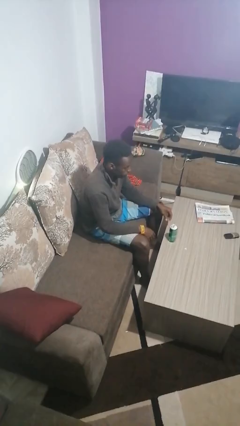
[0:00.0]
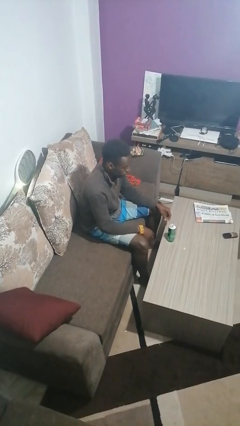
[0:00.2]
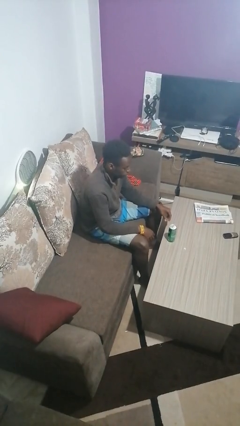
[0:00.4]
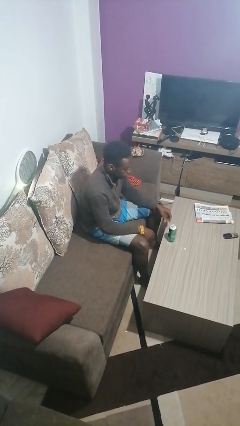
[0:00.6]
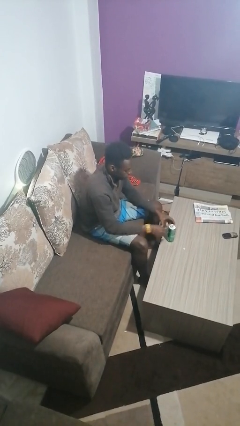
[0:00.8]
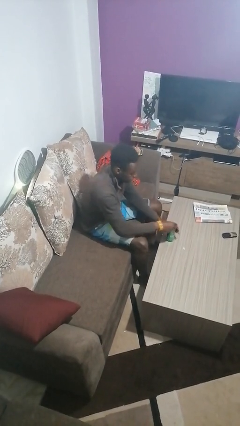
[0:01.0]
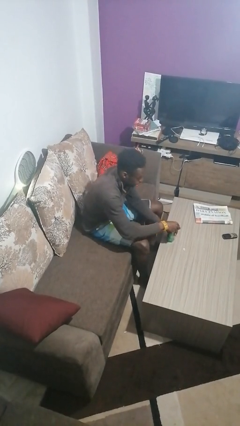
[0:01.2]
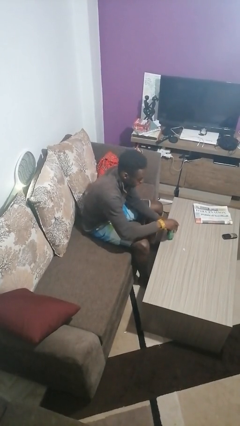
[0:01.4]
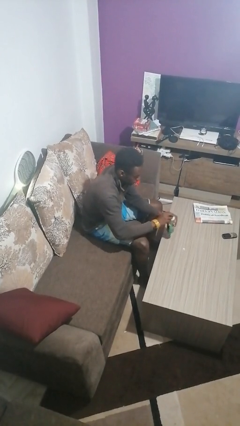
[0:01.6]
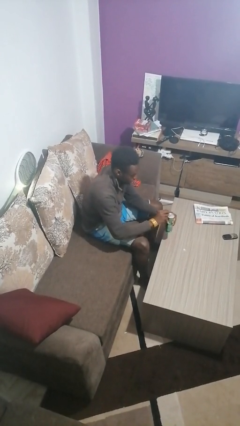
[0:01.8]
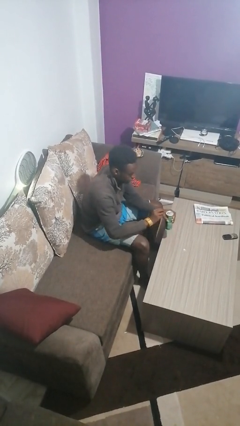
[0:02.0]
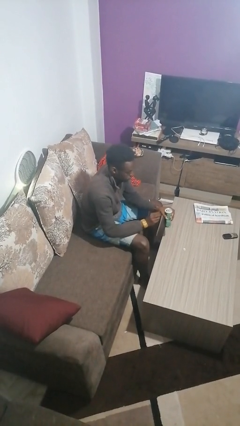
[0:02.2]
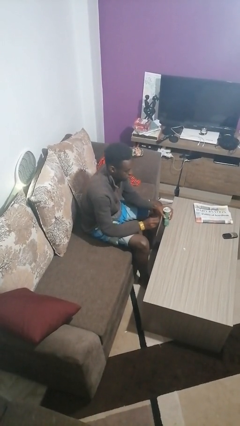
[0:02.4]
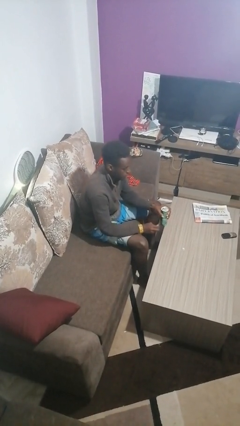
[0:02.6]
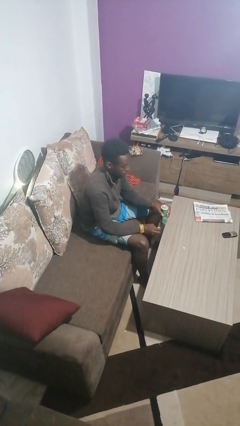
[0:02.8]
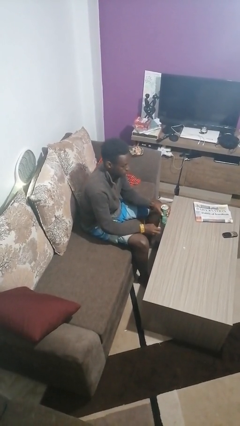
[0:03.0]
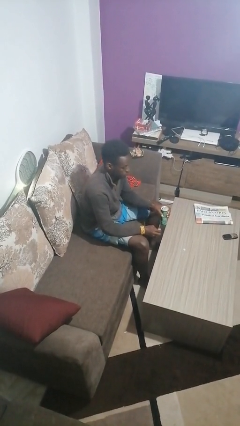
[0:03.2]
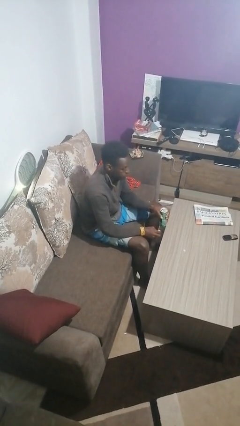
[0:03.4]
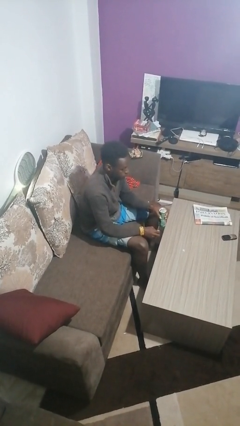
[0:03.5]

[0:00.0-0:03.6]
person opens beverage can

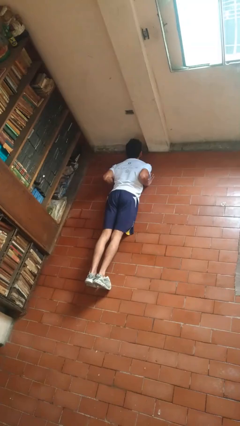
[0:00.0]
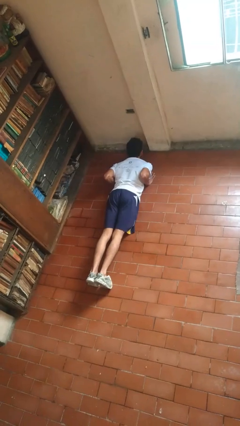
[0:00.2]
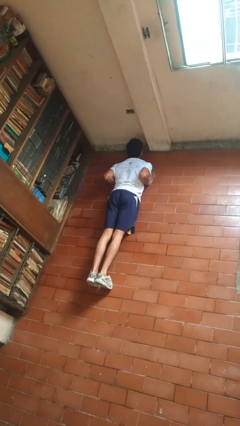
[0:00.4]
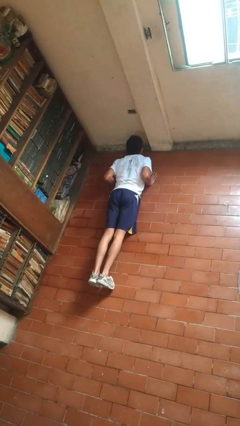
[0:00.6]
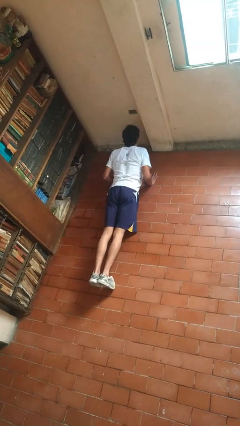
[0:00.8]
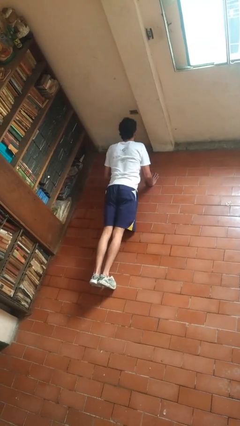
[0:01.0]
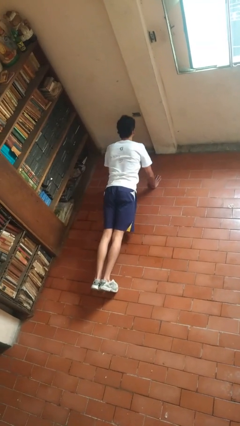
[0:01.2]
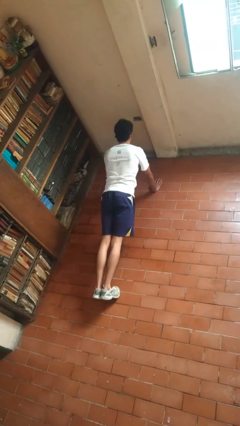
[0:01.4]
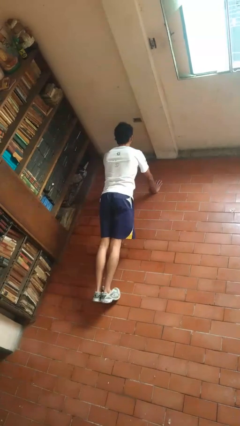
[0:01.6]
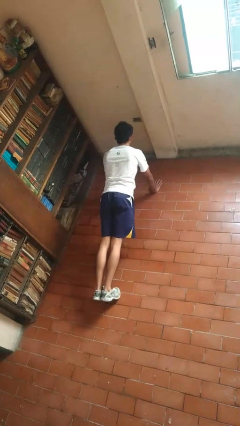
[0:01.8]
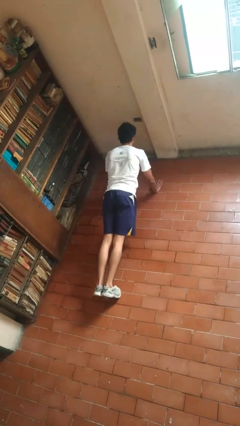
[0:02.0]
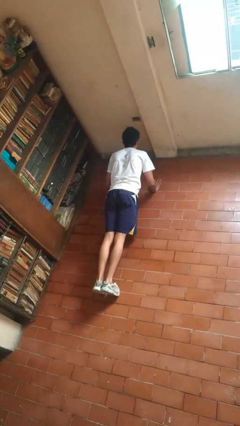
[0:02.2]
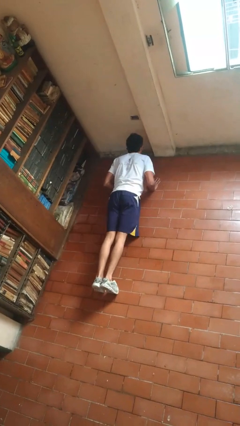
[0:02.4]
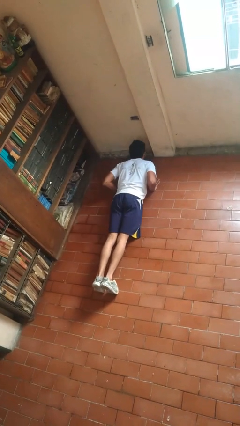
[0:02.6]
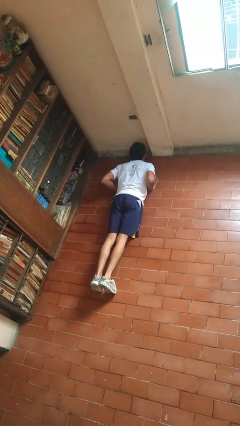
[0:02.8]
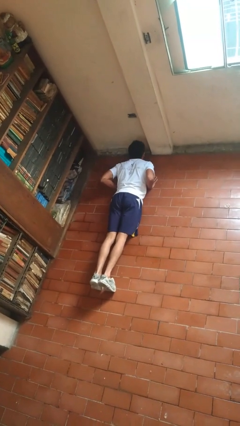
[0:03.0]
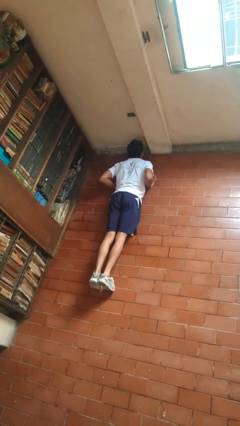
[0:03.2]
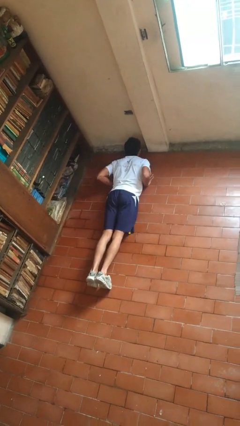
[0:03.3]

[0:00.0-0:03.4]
person exercises with pushup

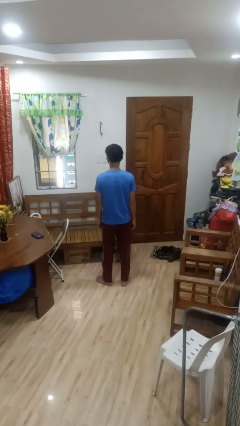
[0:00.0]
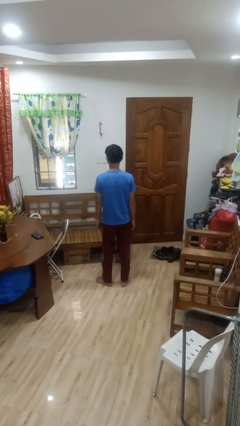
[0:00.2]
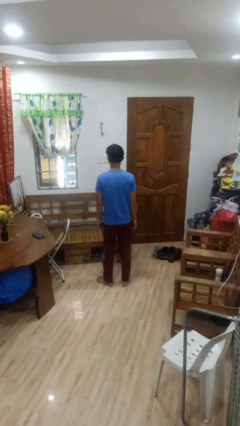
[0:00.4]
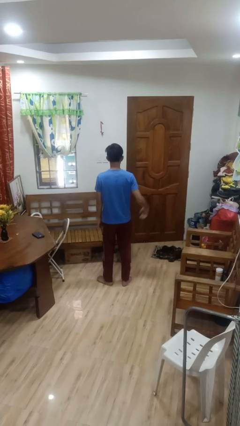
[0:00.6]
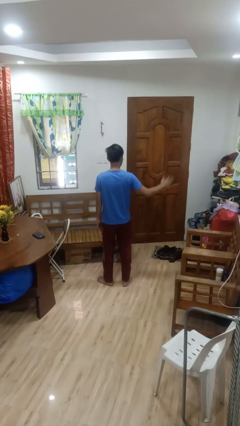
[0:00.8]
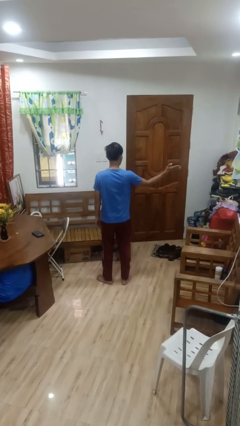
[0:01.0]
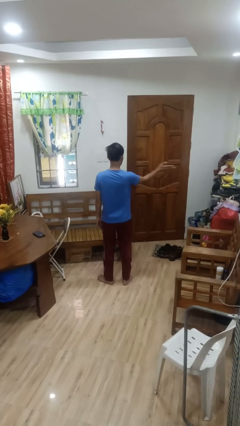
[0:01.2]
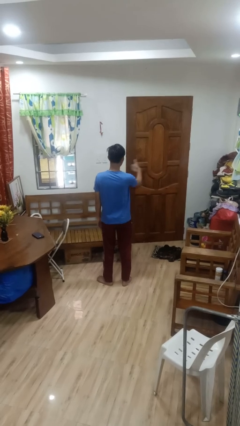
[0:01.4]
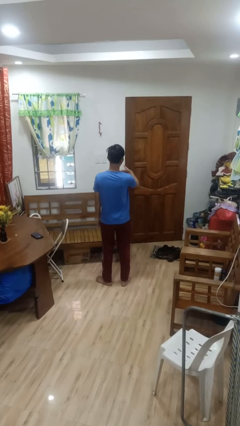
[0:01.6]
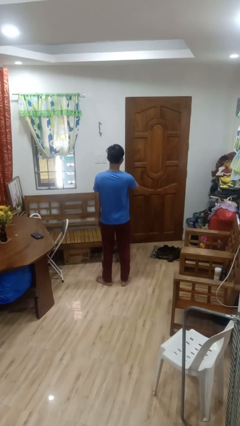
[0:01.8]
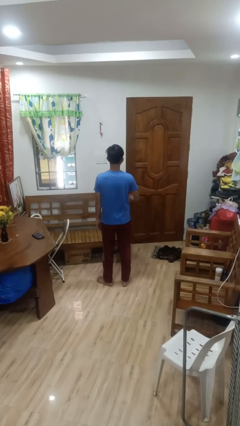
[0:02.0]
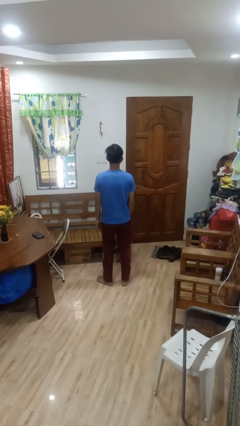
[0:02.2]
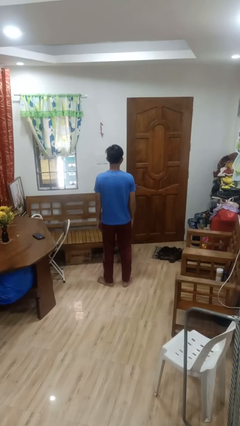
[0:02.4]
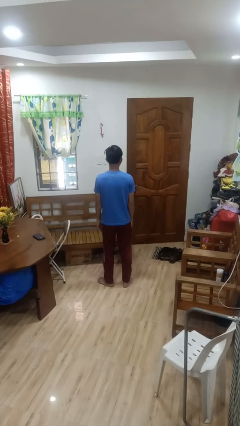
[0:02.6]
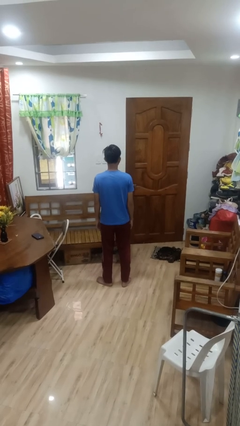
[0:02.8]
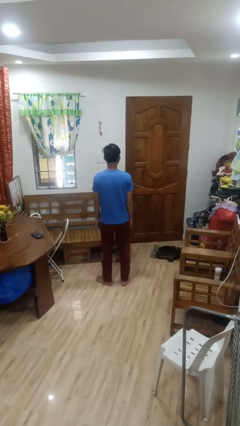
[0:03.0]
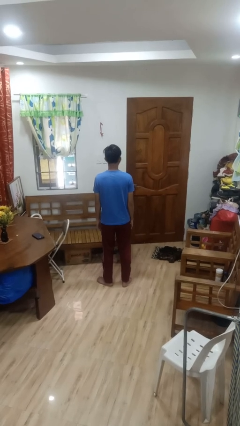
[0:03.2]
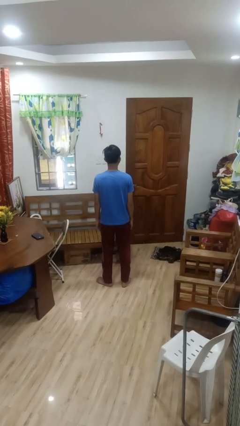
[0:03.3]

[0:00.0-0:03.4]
person gestures swipe left

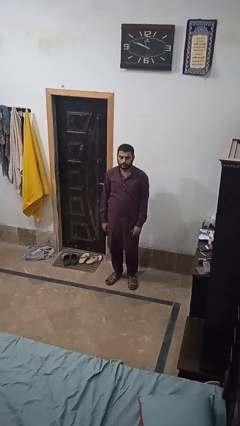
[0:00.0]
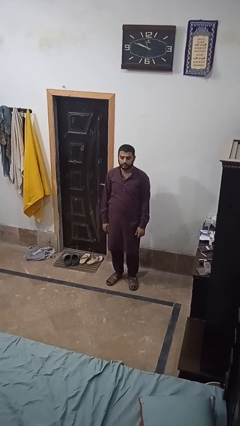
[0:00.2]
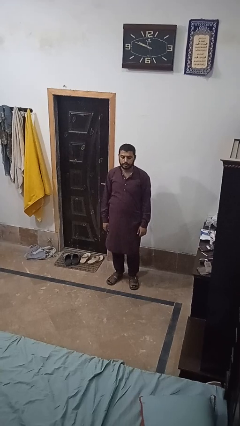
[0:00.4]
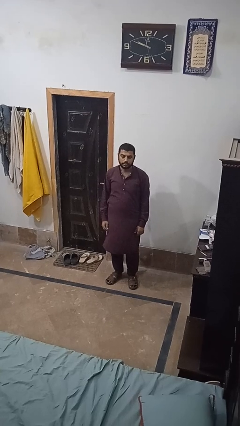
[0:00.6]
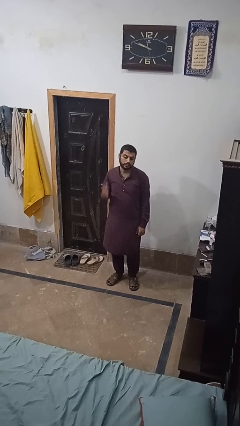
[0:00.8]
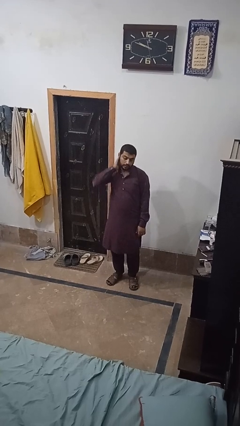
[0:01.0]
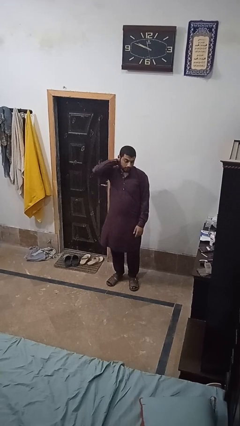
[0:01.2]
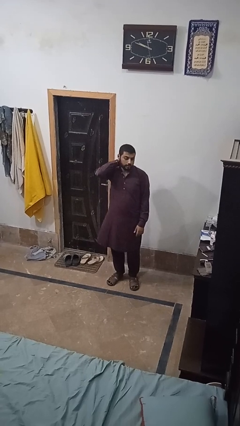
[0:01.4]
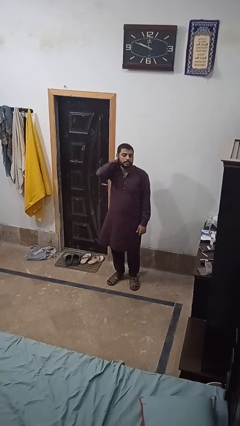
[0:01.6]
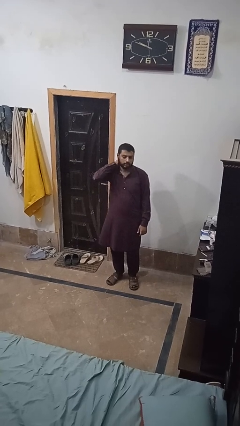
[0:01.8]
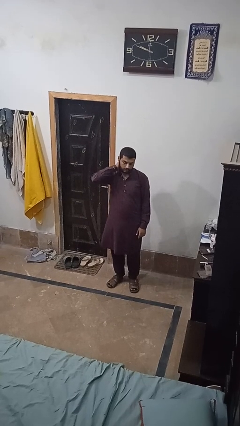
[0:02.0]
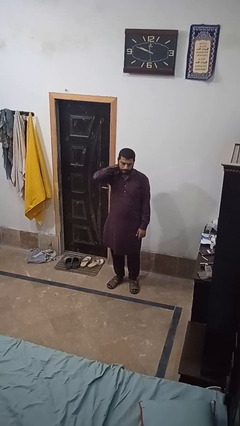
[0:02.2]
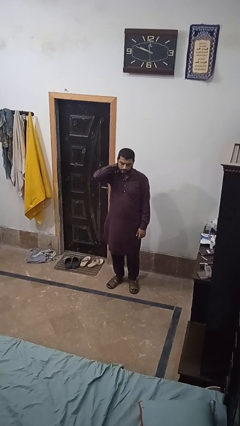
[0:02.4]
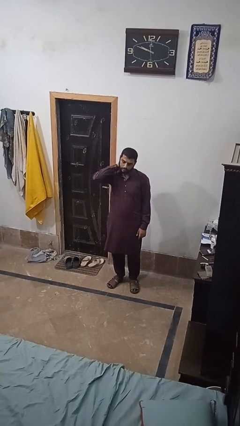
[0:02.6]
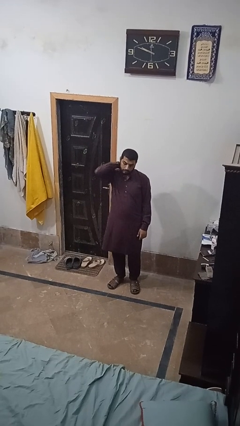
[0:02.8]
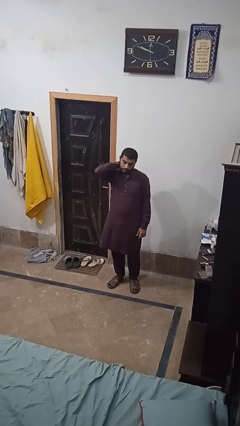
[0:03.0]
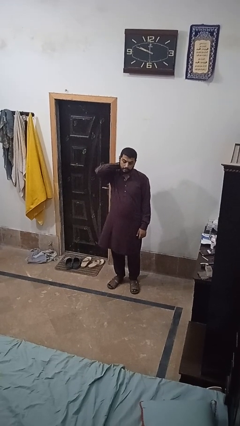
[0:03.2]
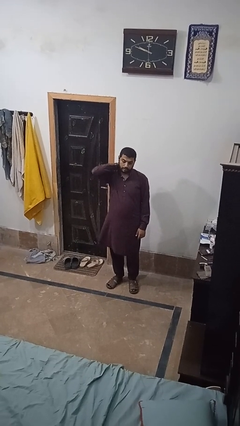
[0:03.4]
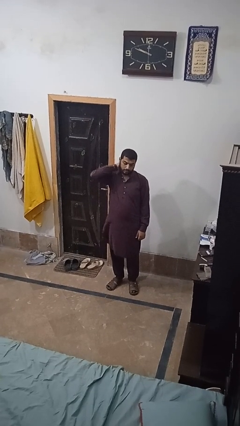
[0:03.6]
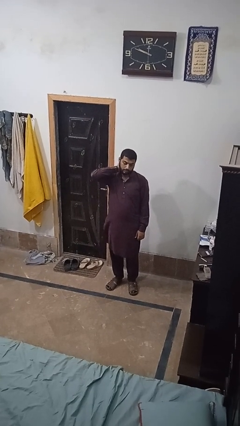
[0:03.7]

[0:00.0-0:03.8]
person rubs neck

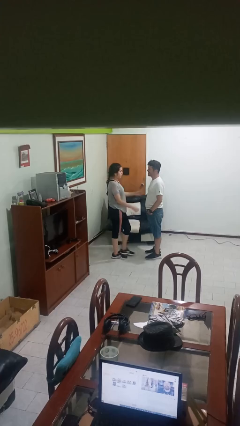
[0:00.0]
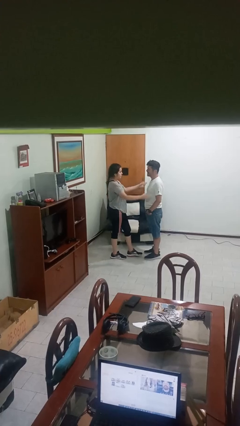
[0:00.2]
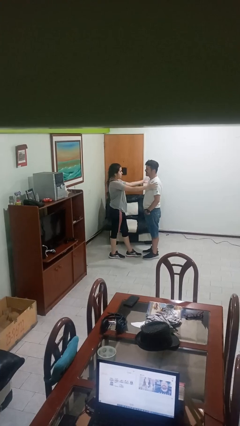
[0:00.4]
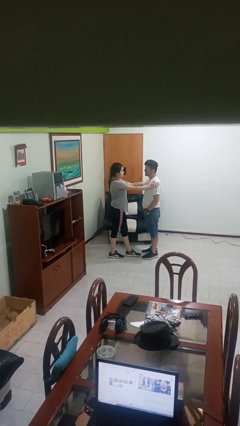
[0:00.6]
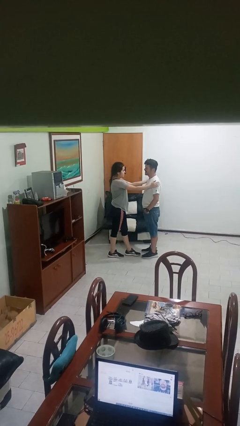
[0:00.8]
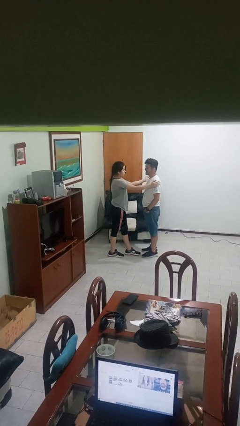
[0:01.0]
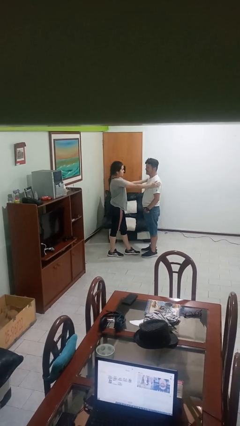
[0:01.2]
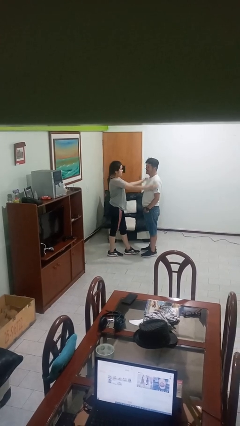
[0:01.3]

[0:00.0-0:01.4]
person pounds shoulders of person

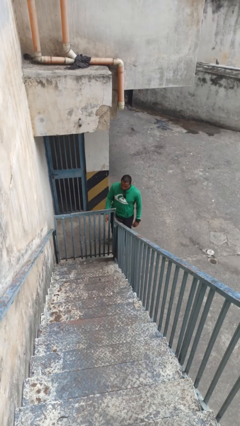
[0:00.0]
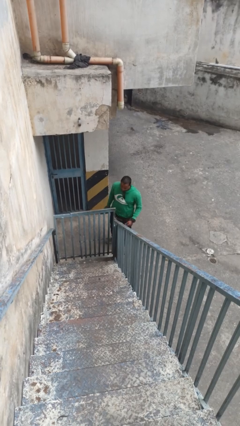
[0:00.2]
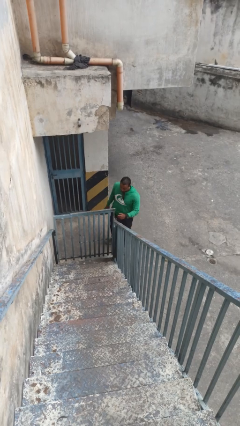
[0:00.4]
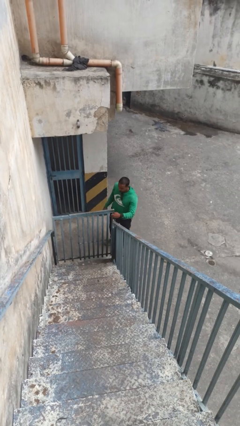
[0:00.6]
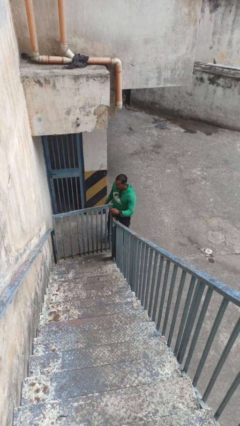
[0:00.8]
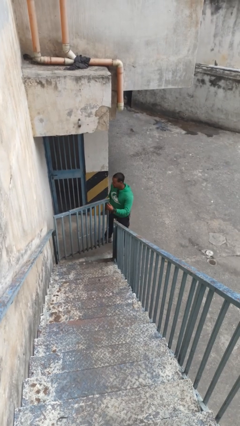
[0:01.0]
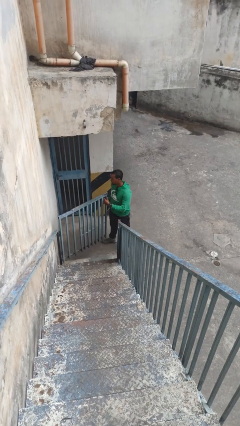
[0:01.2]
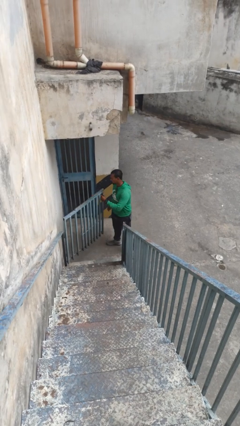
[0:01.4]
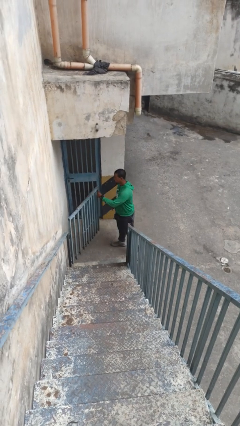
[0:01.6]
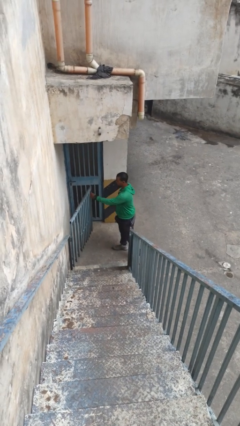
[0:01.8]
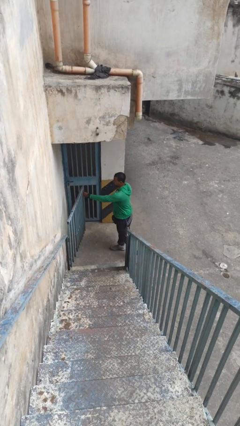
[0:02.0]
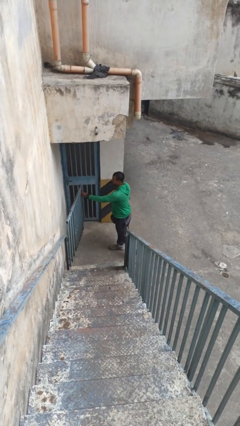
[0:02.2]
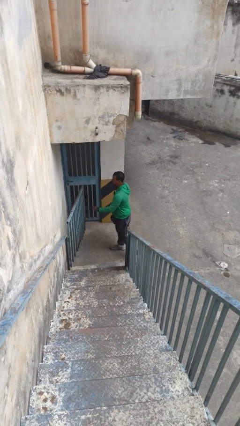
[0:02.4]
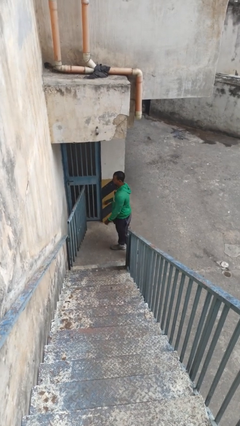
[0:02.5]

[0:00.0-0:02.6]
person opens facility door
